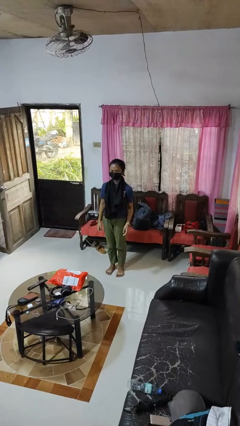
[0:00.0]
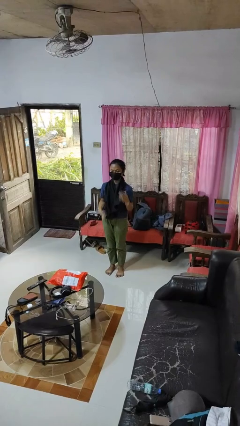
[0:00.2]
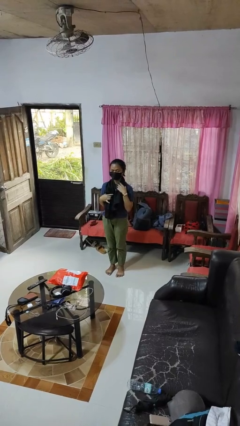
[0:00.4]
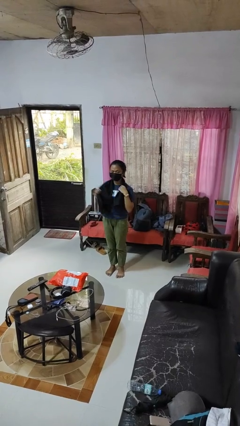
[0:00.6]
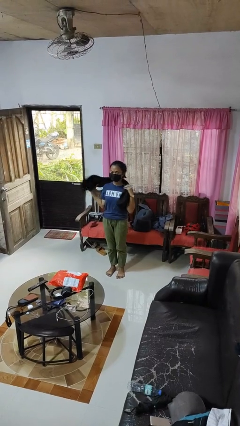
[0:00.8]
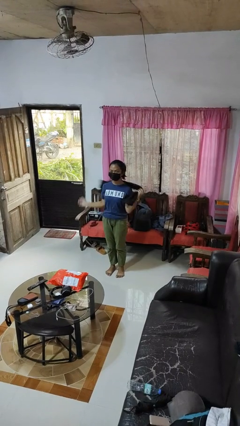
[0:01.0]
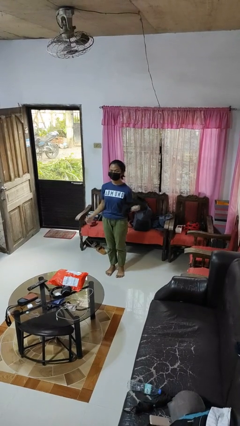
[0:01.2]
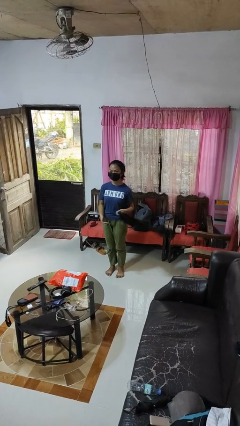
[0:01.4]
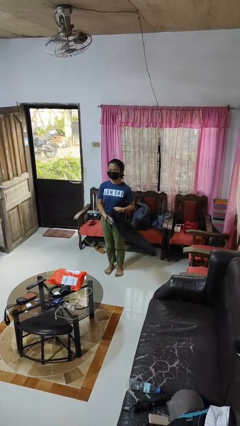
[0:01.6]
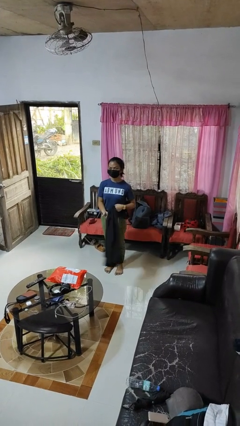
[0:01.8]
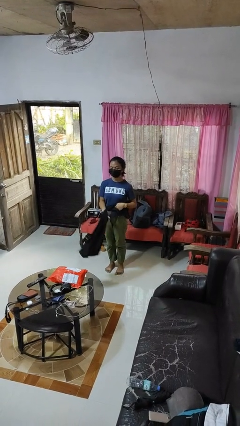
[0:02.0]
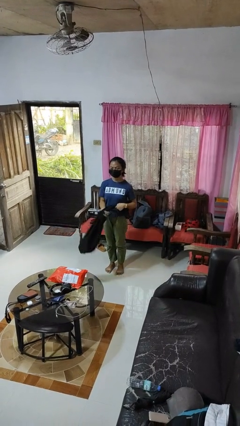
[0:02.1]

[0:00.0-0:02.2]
person takes off scarf

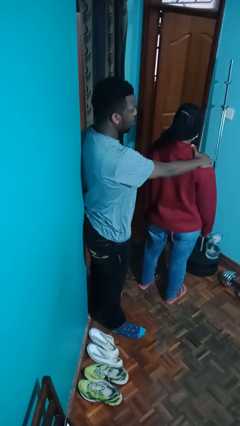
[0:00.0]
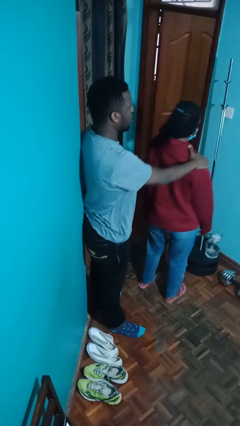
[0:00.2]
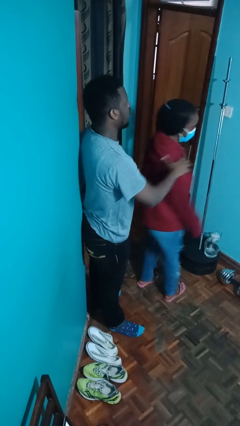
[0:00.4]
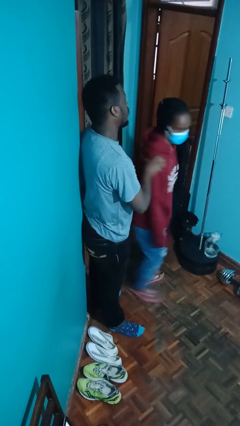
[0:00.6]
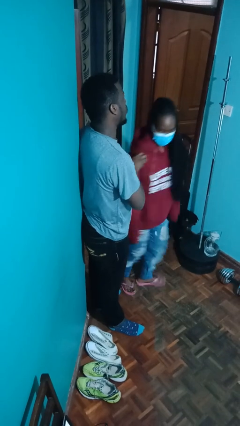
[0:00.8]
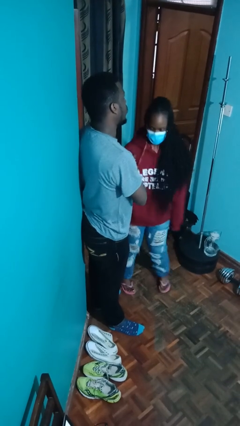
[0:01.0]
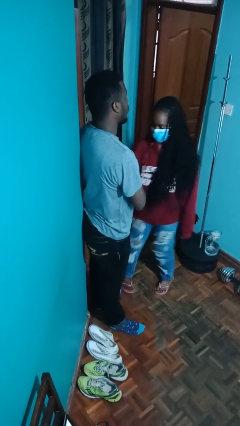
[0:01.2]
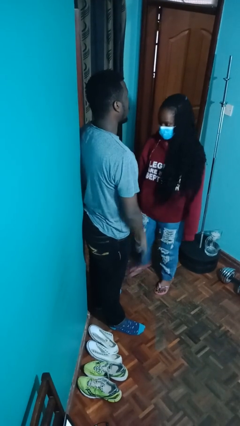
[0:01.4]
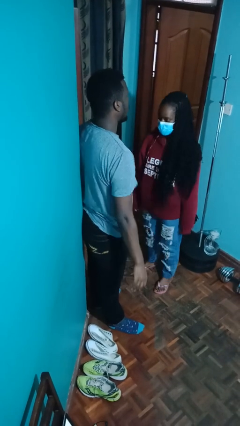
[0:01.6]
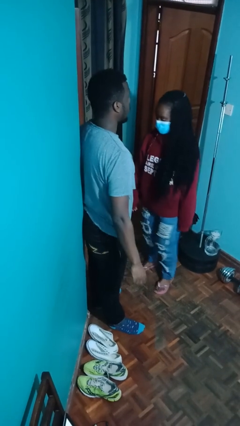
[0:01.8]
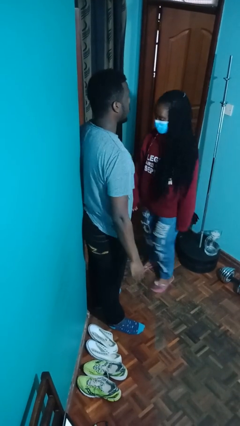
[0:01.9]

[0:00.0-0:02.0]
person spins person around

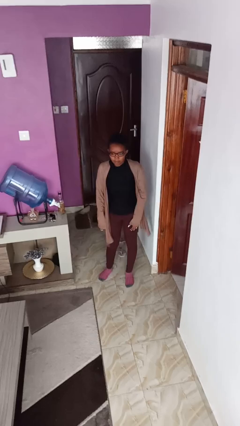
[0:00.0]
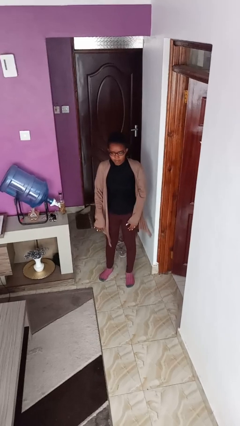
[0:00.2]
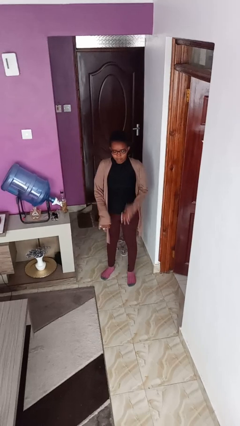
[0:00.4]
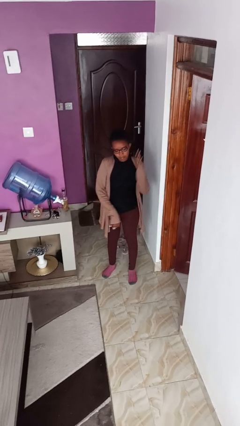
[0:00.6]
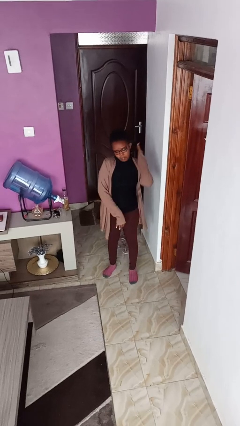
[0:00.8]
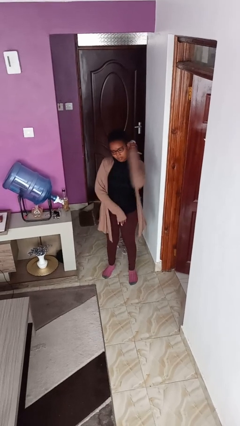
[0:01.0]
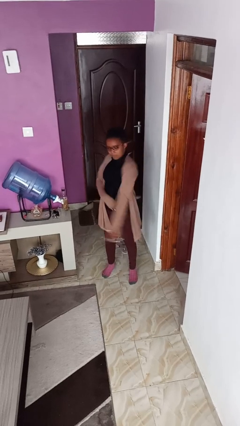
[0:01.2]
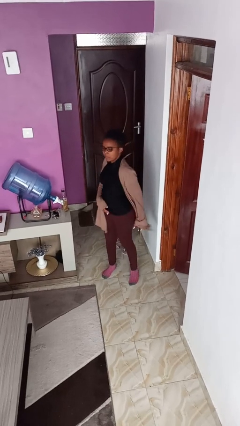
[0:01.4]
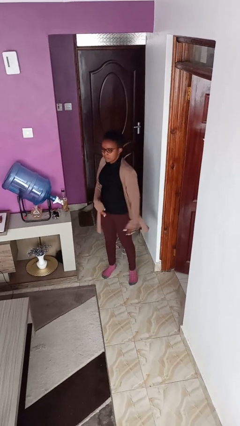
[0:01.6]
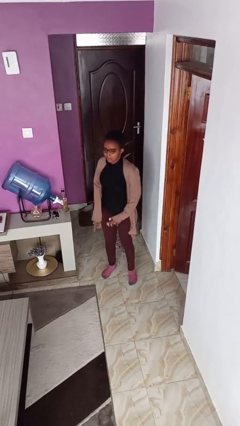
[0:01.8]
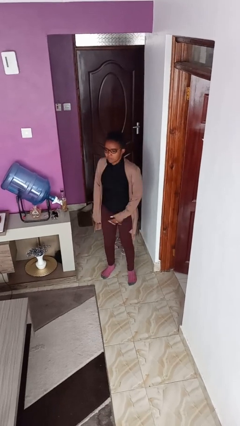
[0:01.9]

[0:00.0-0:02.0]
person karate chop

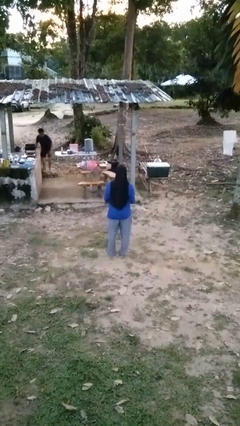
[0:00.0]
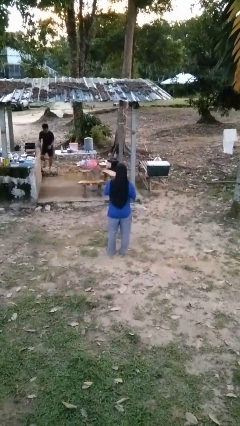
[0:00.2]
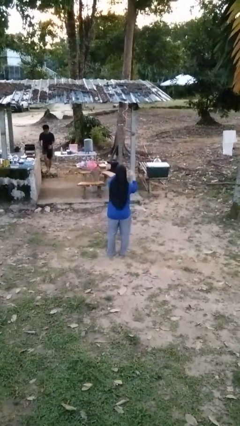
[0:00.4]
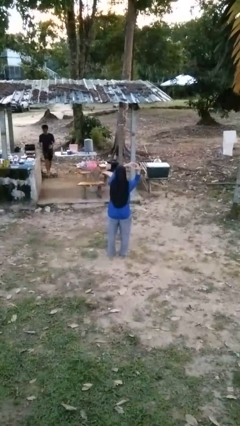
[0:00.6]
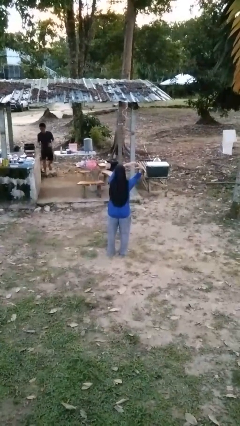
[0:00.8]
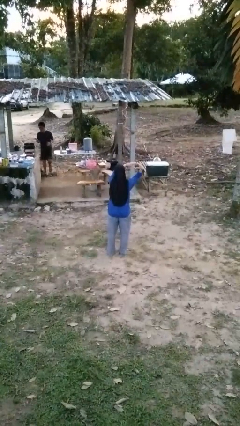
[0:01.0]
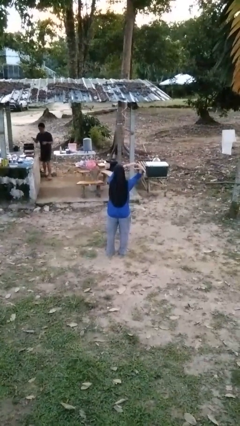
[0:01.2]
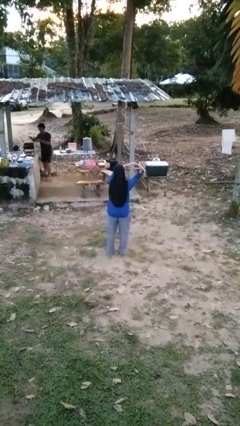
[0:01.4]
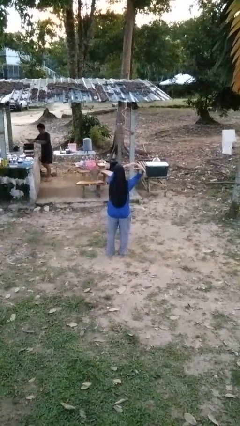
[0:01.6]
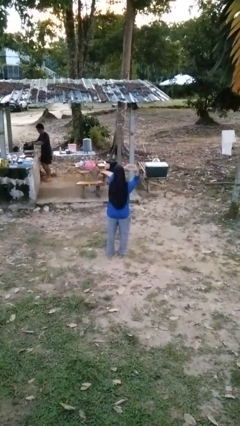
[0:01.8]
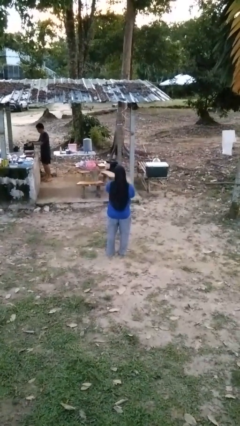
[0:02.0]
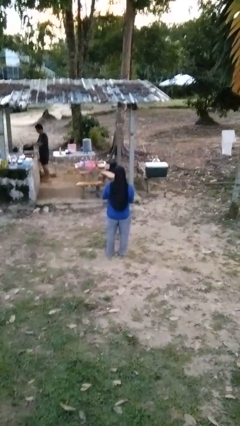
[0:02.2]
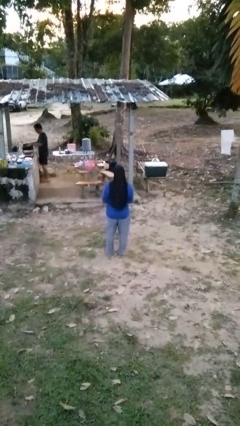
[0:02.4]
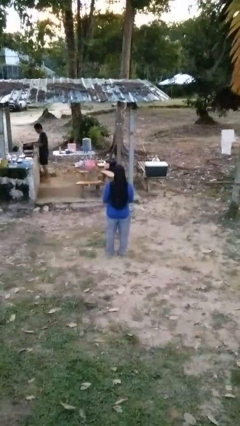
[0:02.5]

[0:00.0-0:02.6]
person gestures heart

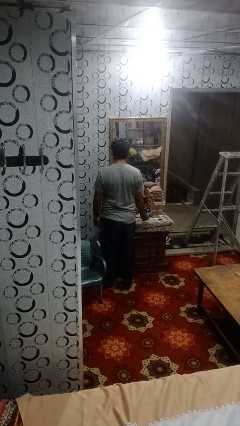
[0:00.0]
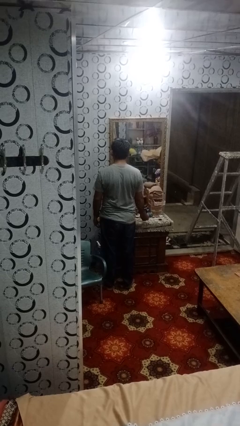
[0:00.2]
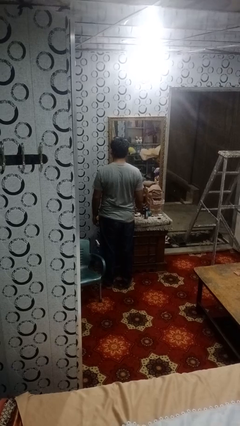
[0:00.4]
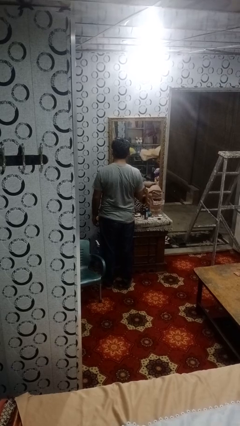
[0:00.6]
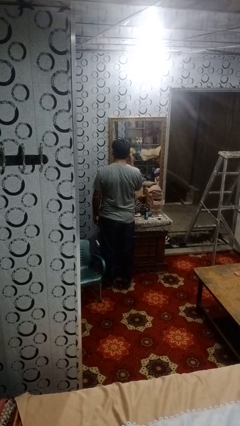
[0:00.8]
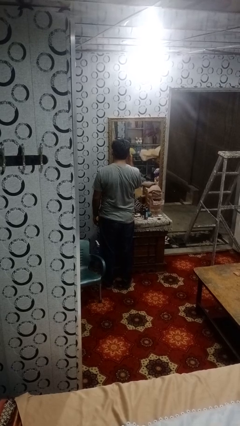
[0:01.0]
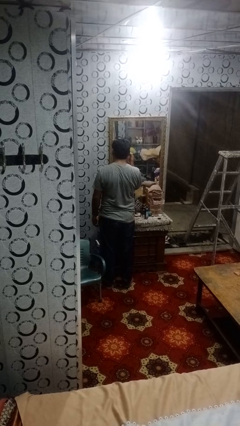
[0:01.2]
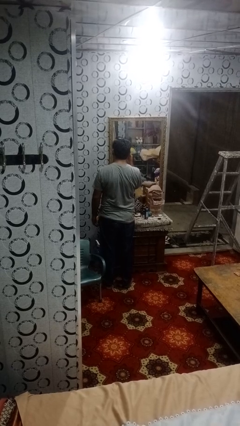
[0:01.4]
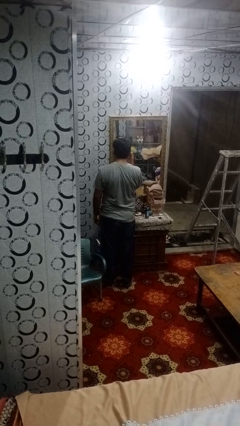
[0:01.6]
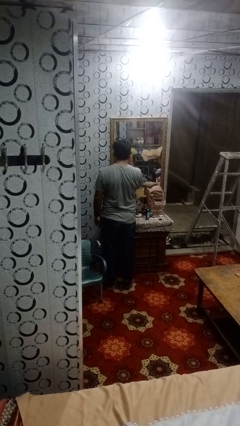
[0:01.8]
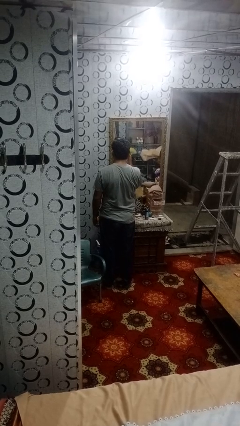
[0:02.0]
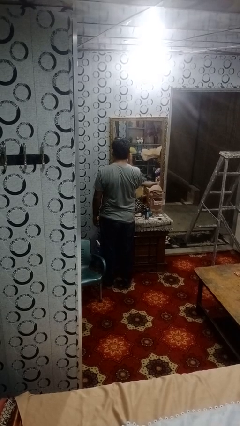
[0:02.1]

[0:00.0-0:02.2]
person applies eye makeup

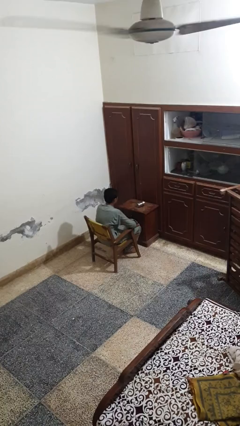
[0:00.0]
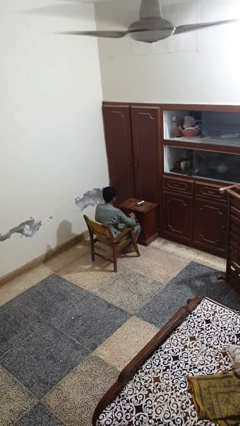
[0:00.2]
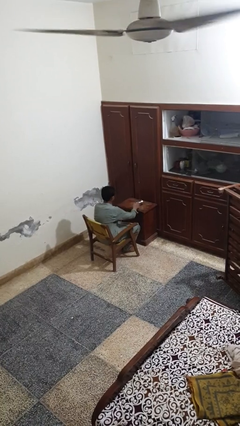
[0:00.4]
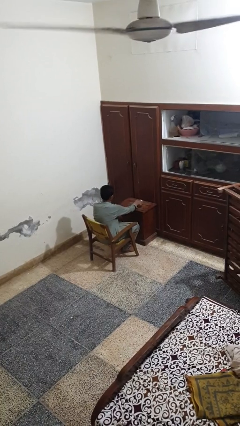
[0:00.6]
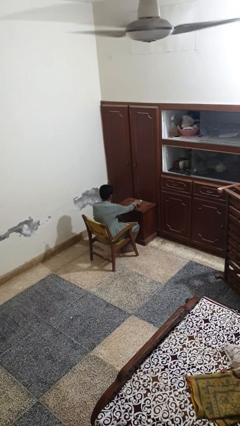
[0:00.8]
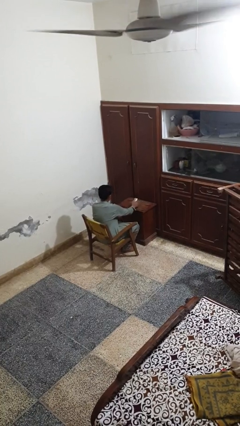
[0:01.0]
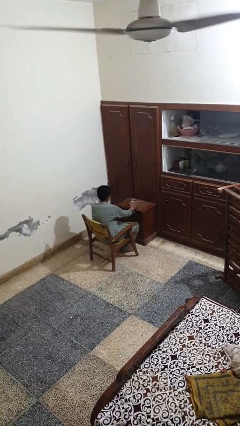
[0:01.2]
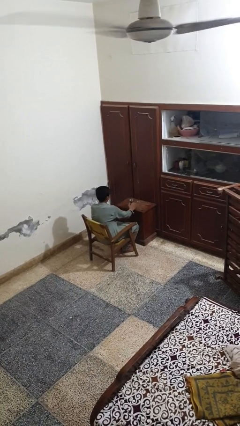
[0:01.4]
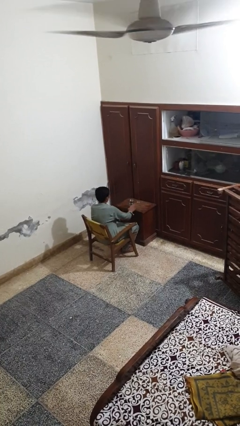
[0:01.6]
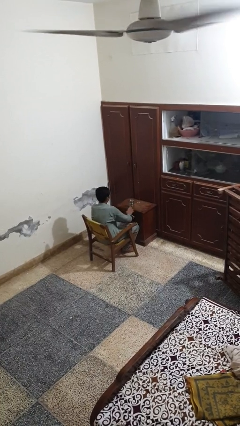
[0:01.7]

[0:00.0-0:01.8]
person sets upright glass

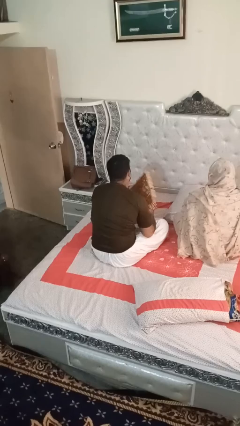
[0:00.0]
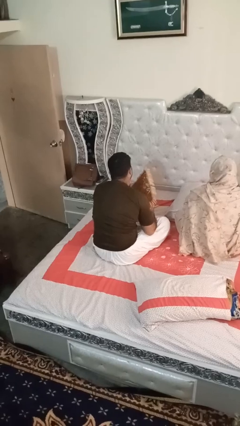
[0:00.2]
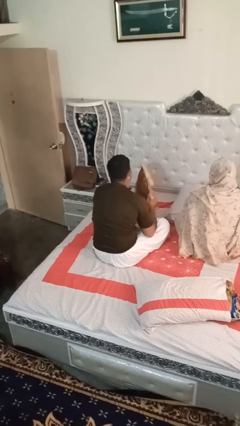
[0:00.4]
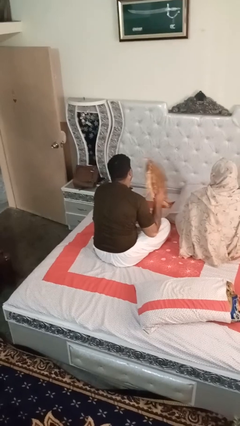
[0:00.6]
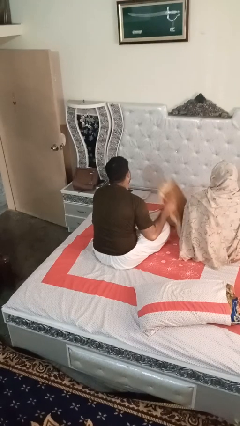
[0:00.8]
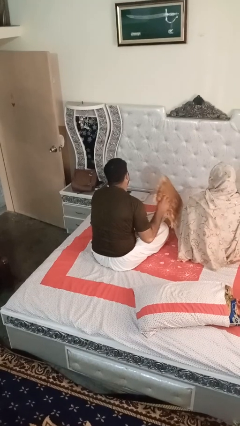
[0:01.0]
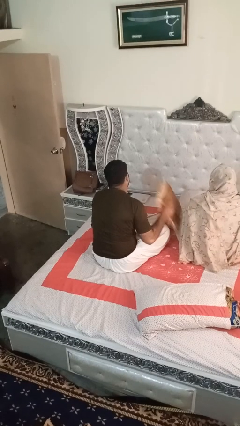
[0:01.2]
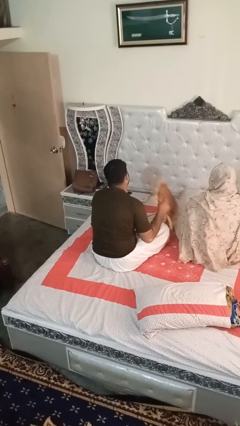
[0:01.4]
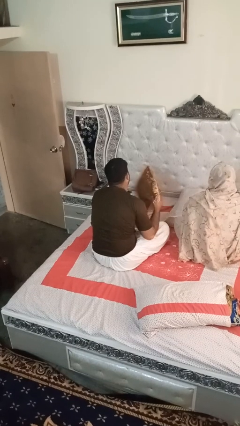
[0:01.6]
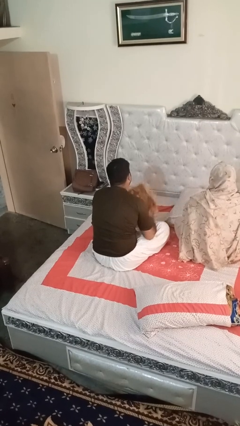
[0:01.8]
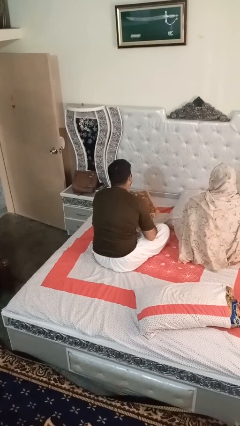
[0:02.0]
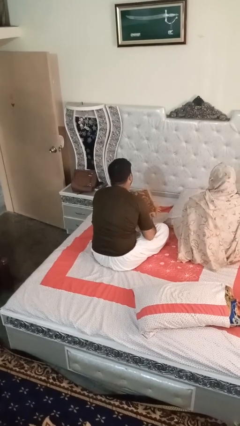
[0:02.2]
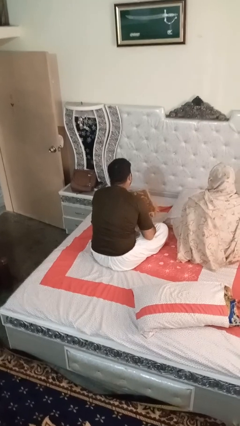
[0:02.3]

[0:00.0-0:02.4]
person hits person with pillow

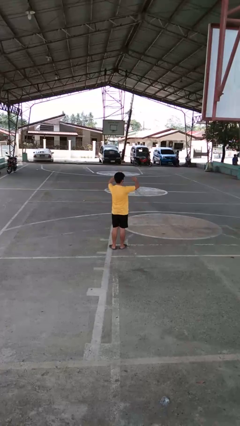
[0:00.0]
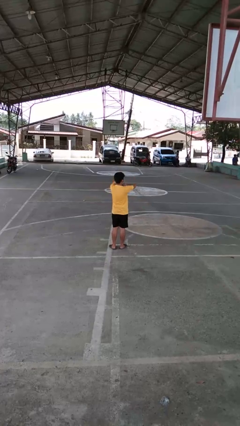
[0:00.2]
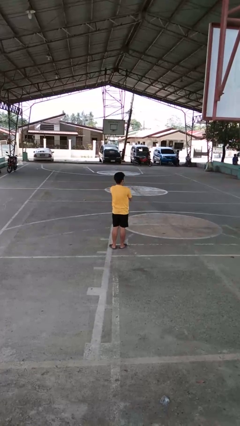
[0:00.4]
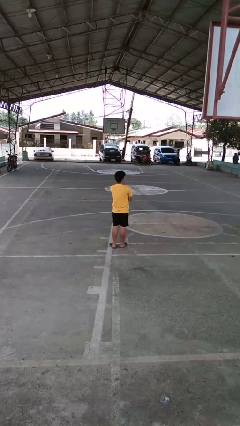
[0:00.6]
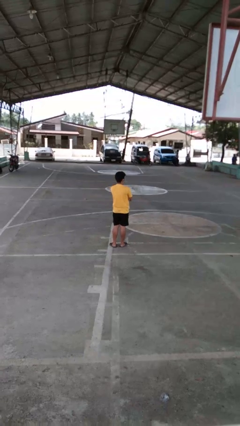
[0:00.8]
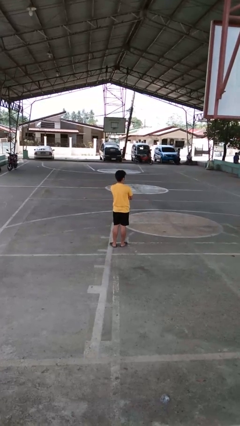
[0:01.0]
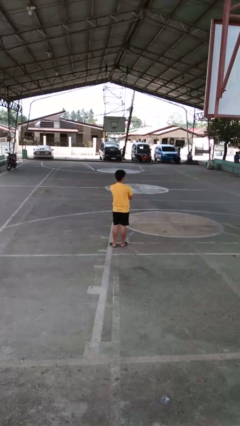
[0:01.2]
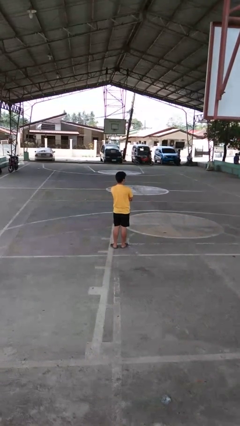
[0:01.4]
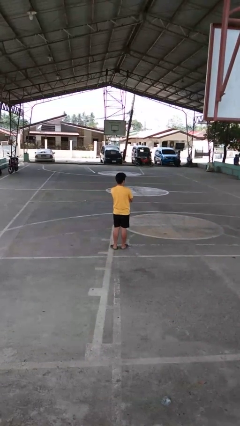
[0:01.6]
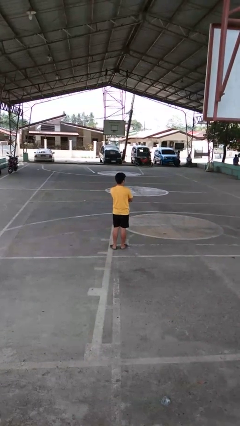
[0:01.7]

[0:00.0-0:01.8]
person crosses arms

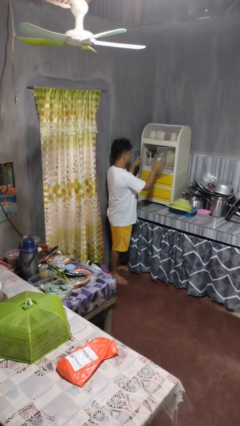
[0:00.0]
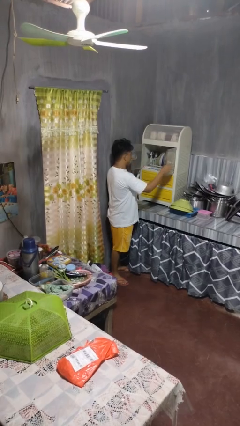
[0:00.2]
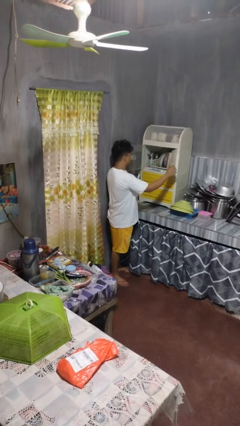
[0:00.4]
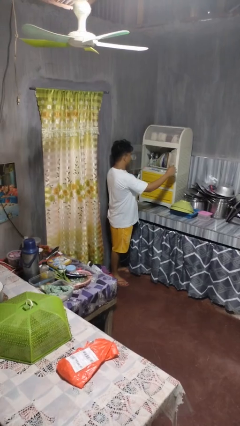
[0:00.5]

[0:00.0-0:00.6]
person opens cabinet
